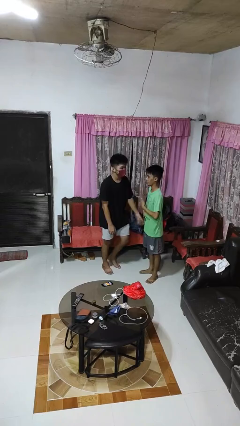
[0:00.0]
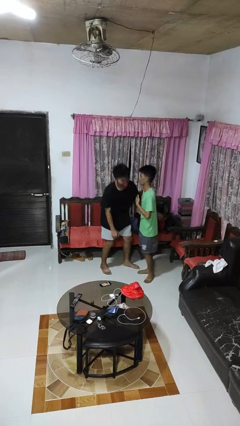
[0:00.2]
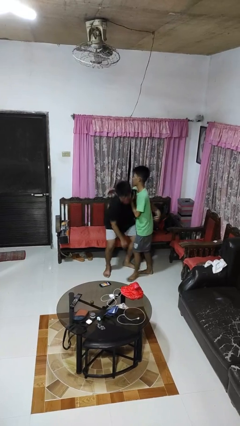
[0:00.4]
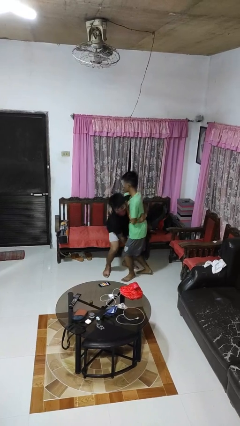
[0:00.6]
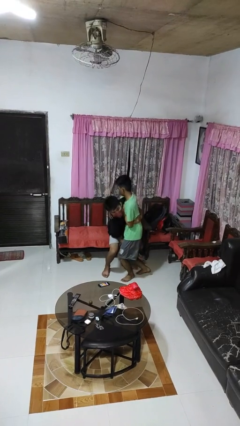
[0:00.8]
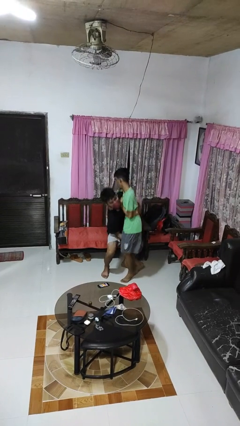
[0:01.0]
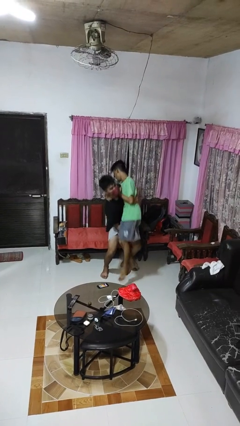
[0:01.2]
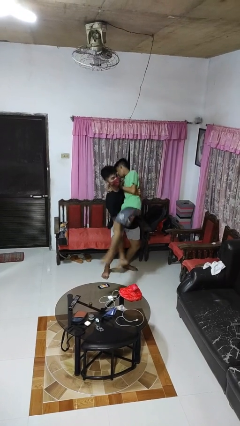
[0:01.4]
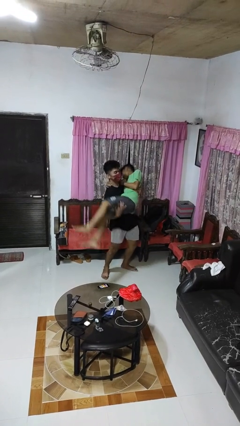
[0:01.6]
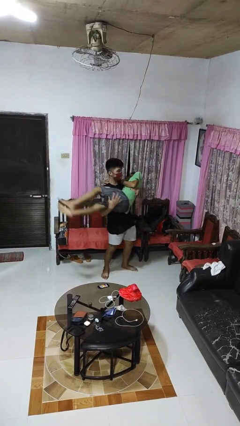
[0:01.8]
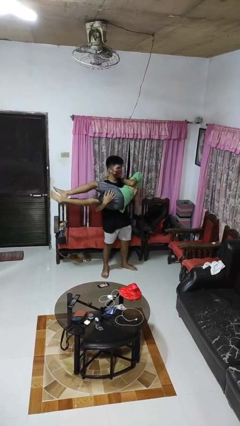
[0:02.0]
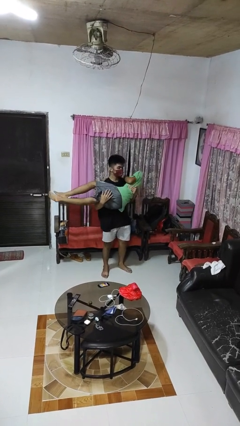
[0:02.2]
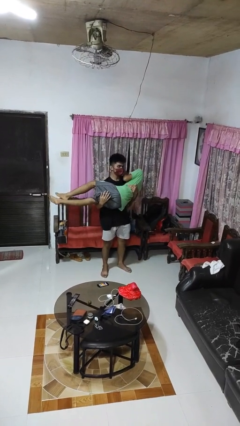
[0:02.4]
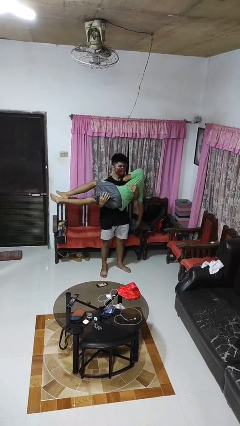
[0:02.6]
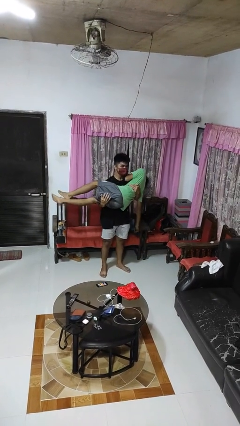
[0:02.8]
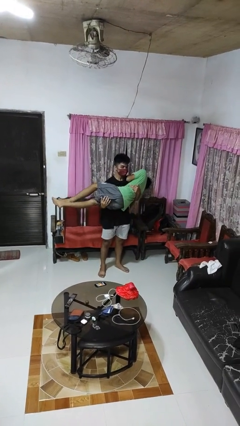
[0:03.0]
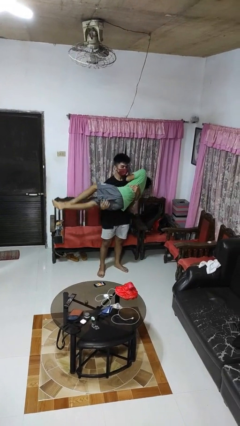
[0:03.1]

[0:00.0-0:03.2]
person picks up person

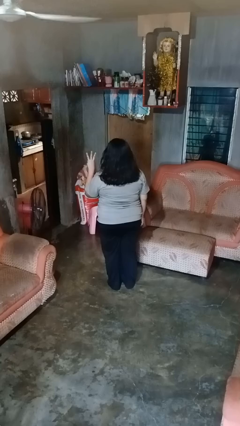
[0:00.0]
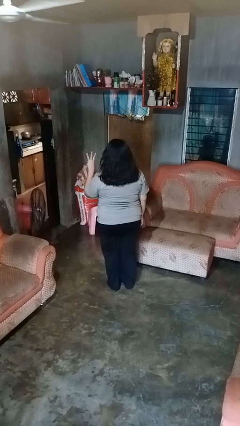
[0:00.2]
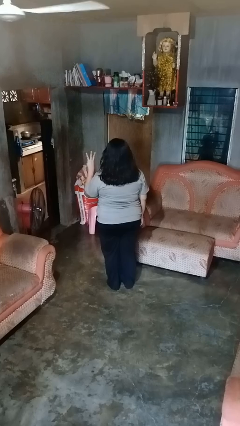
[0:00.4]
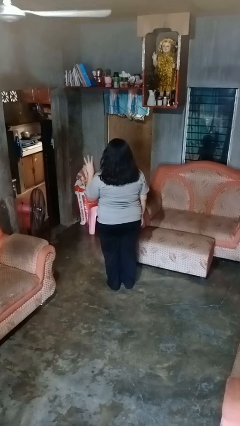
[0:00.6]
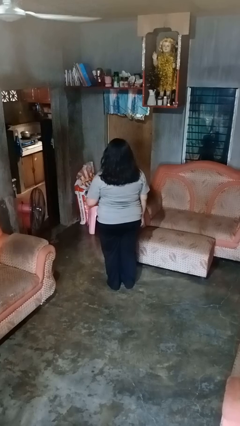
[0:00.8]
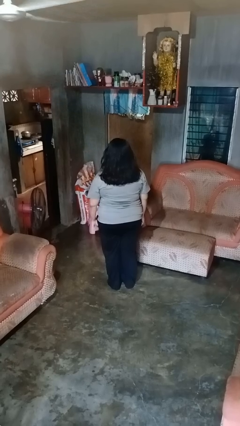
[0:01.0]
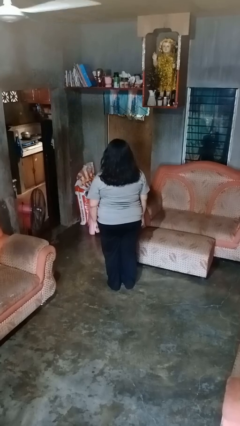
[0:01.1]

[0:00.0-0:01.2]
person gestures number three

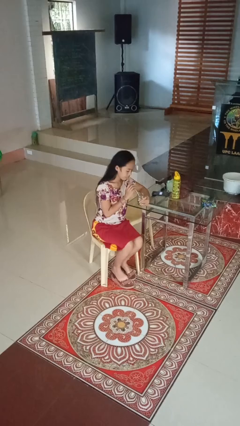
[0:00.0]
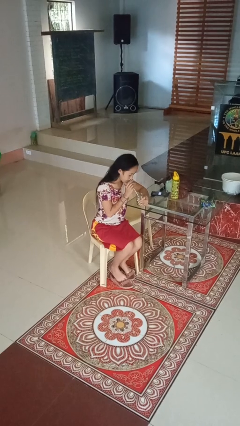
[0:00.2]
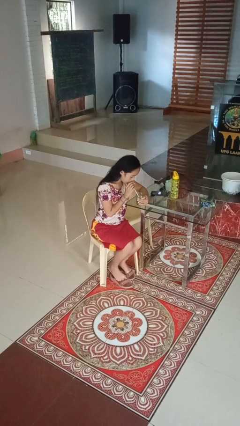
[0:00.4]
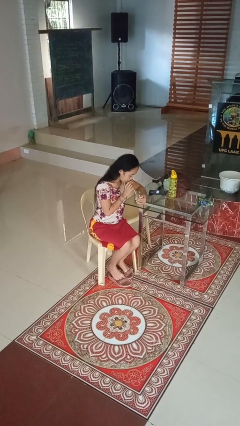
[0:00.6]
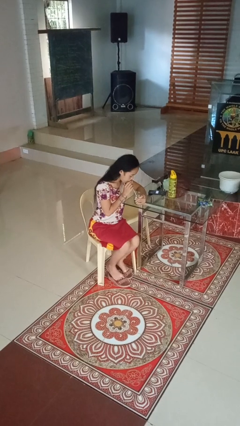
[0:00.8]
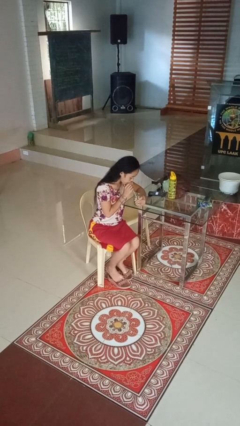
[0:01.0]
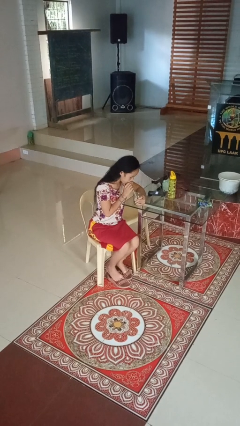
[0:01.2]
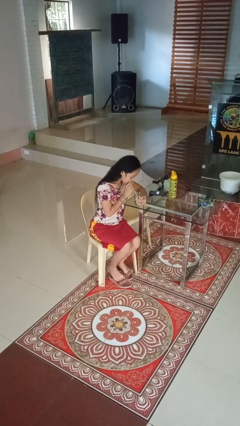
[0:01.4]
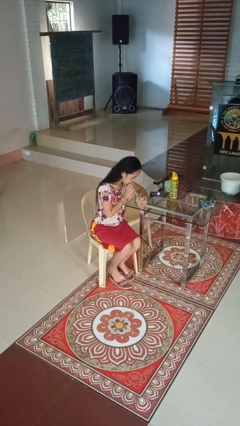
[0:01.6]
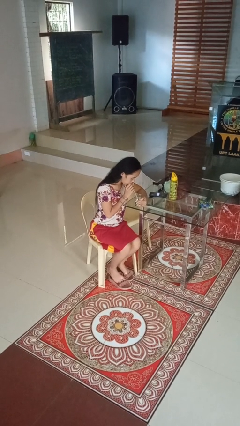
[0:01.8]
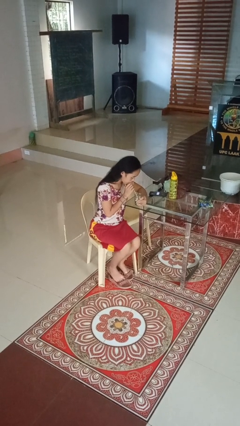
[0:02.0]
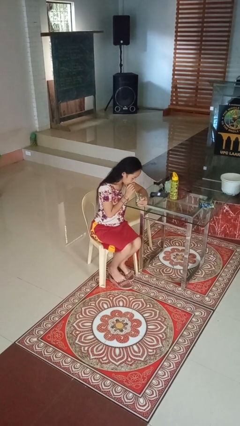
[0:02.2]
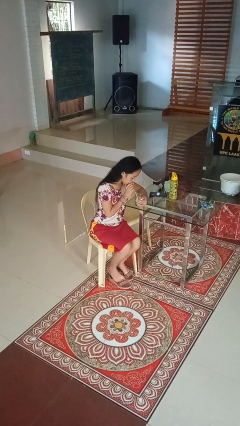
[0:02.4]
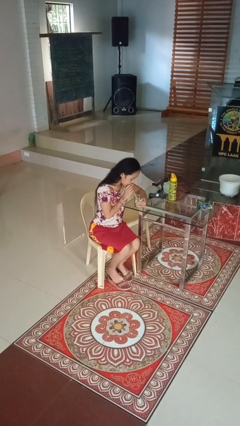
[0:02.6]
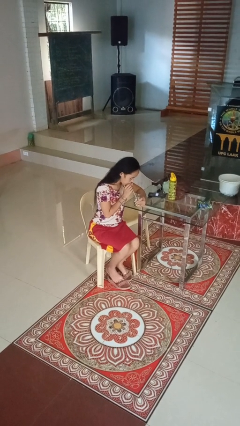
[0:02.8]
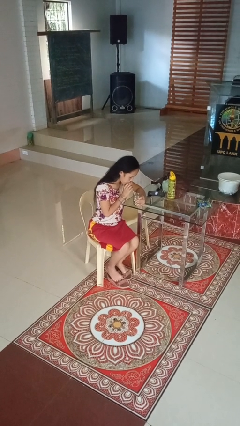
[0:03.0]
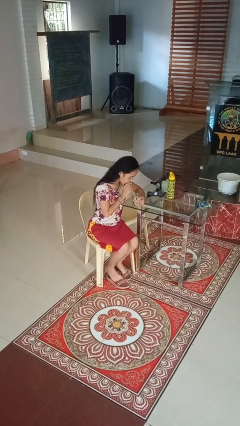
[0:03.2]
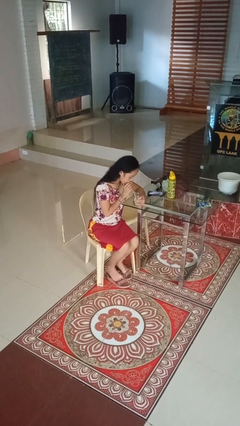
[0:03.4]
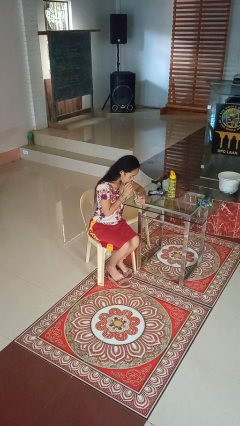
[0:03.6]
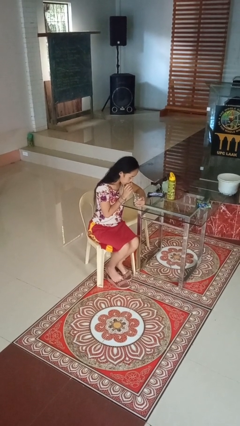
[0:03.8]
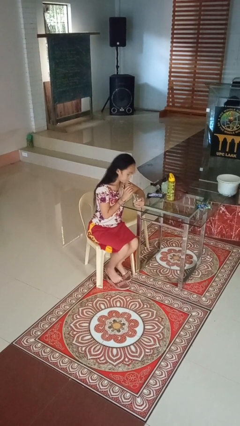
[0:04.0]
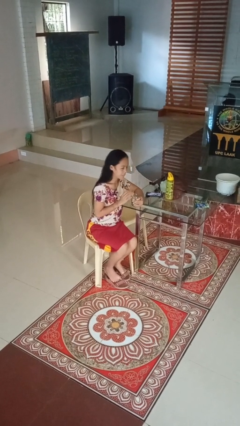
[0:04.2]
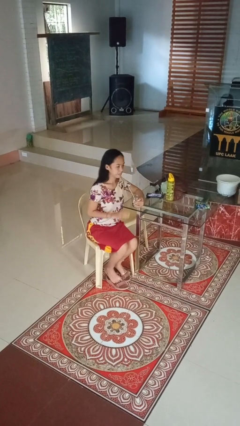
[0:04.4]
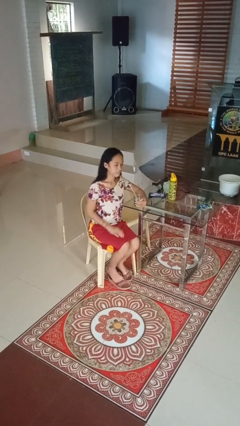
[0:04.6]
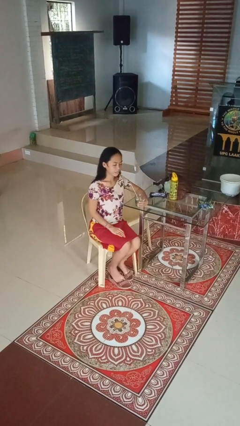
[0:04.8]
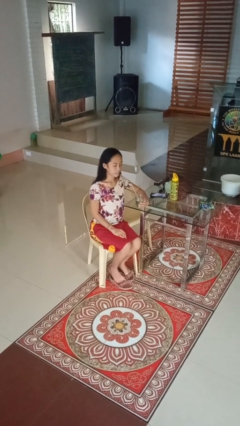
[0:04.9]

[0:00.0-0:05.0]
person drinks from straw

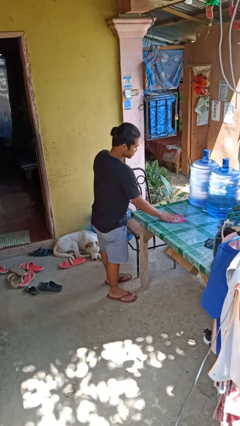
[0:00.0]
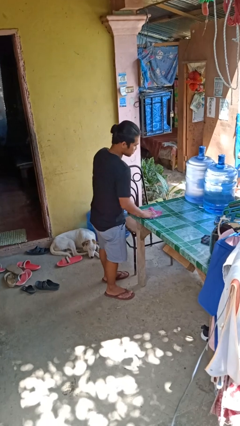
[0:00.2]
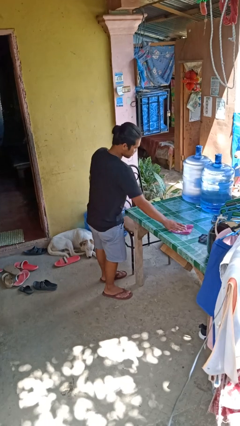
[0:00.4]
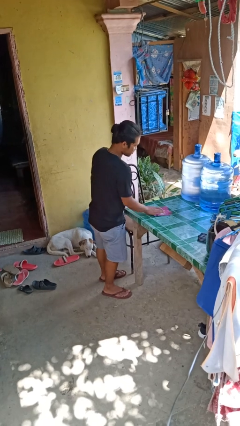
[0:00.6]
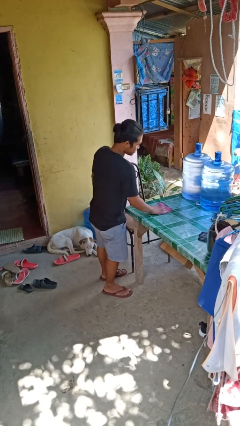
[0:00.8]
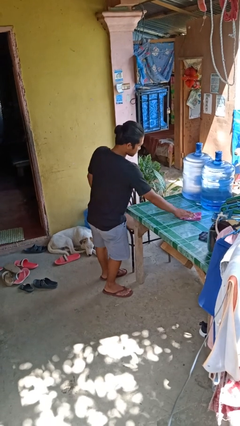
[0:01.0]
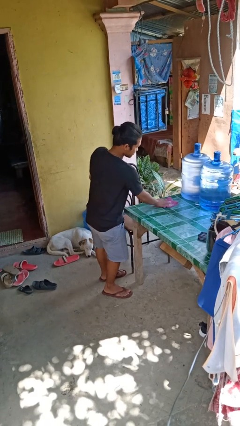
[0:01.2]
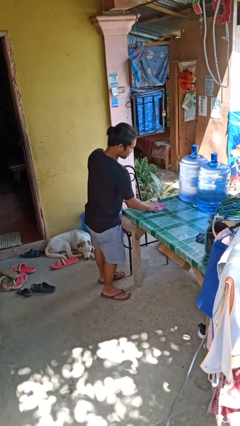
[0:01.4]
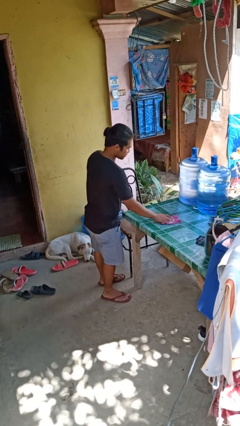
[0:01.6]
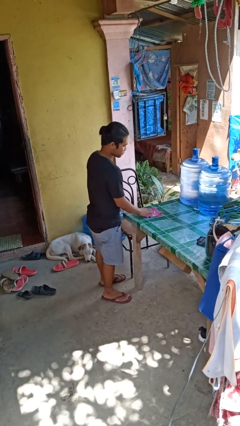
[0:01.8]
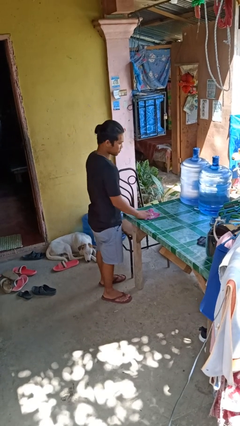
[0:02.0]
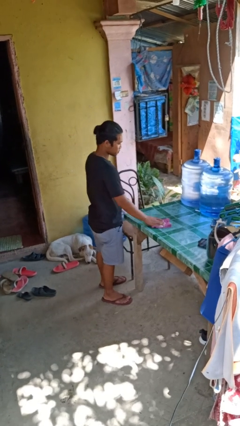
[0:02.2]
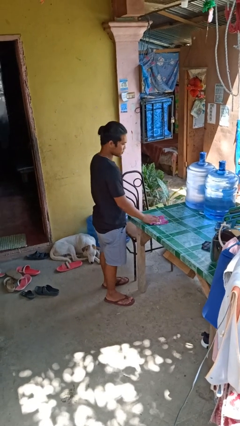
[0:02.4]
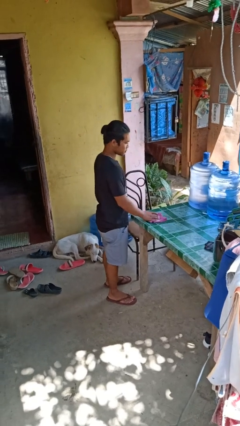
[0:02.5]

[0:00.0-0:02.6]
person cleans table with rag

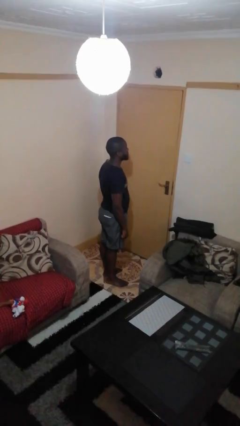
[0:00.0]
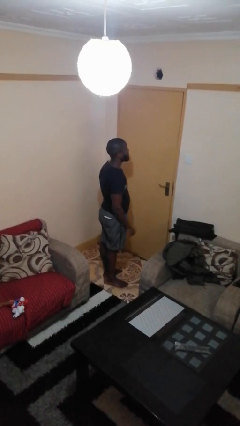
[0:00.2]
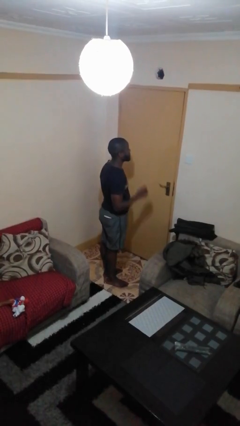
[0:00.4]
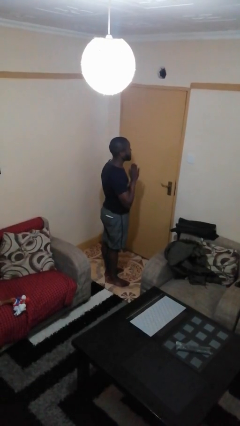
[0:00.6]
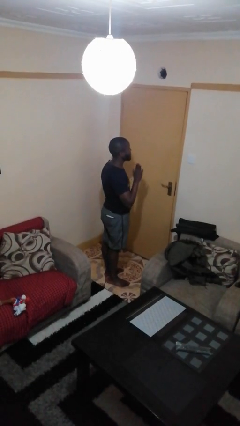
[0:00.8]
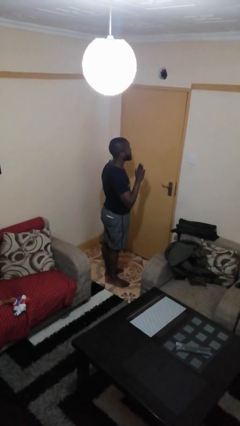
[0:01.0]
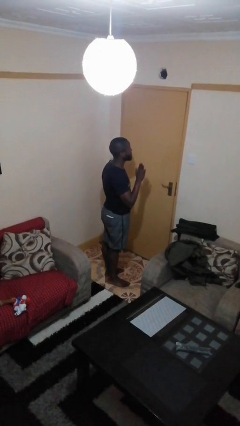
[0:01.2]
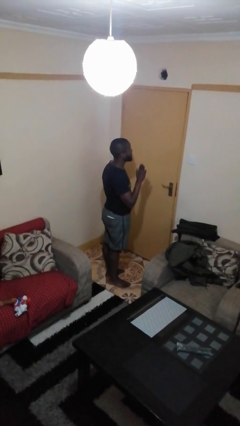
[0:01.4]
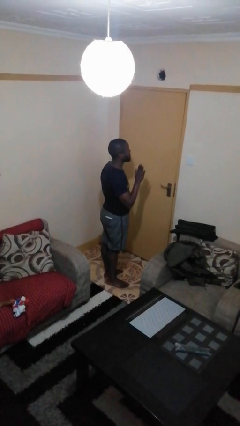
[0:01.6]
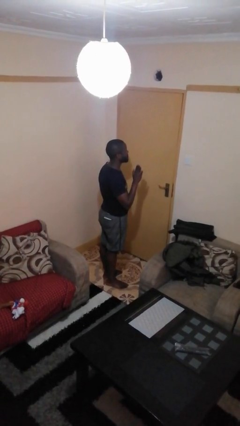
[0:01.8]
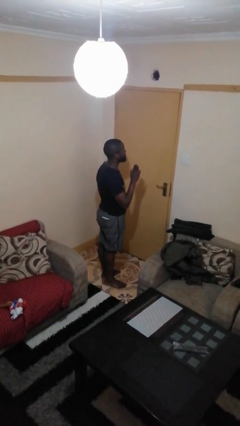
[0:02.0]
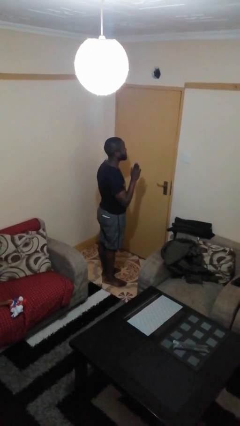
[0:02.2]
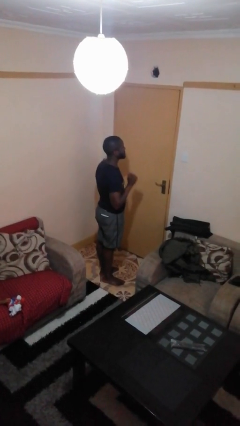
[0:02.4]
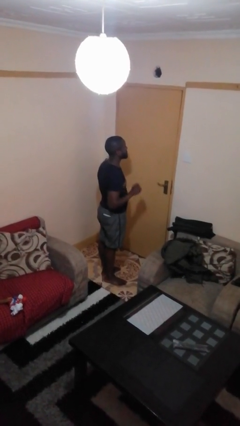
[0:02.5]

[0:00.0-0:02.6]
person gestures stop

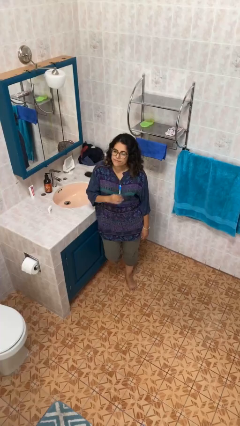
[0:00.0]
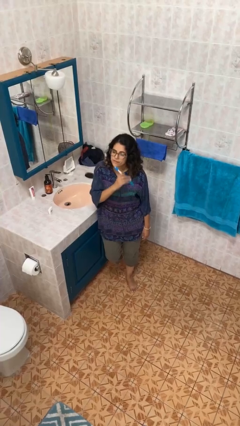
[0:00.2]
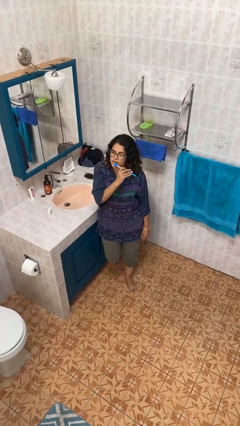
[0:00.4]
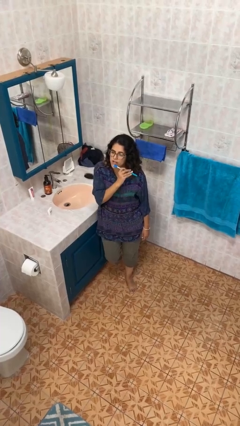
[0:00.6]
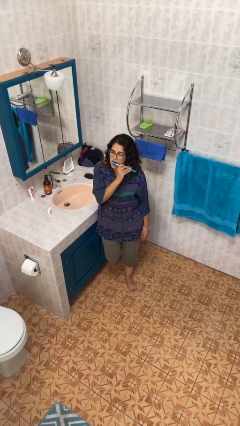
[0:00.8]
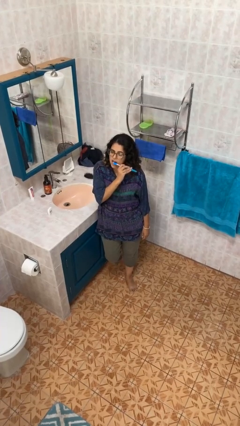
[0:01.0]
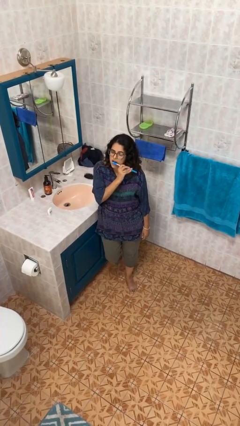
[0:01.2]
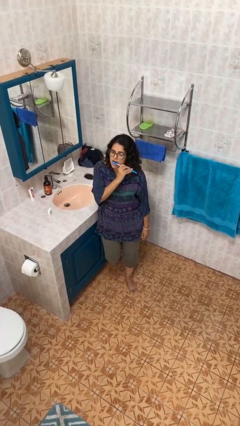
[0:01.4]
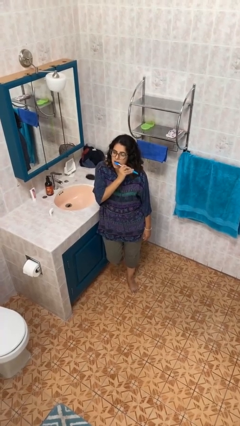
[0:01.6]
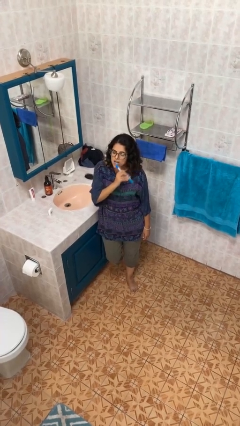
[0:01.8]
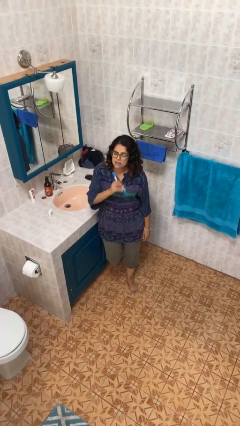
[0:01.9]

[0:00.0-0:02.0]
person brushes teeth

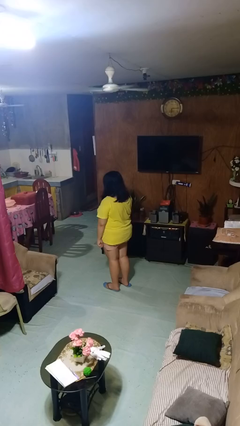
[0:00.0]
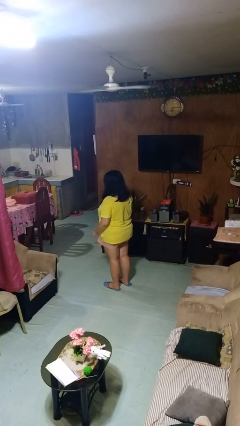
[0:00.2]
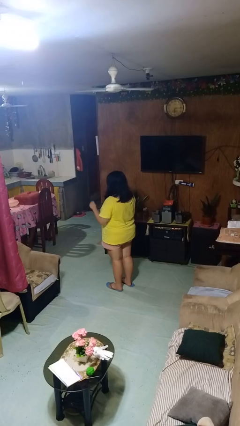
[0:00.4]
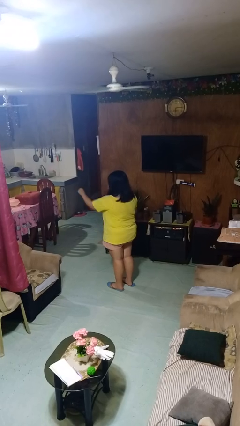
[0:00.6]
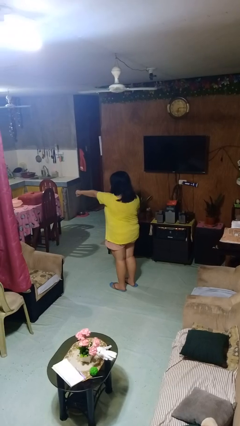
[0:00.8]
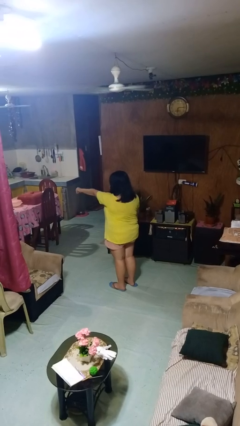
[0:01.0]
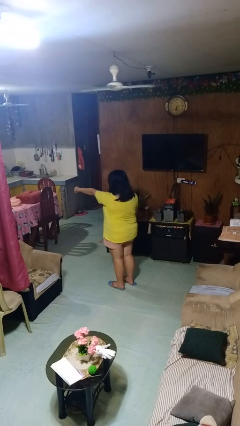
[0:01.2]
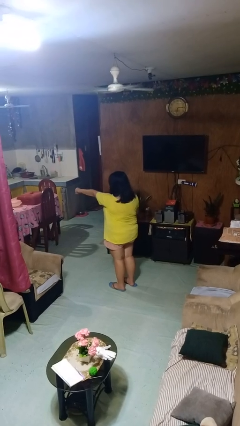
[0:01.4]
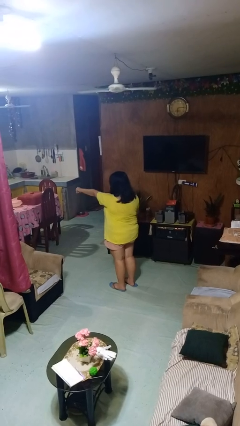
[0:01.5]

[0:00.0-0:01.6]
person punches
